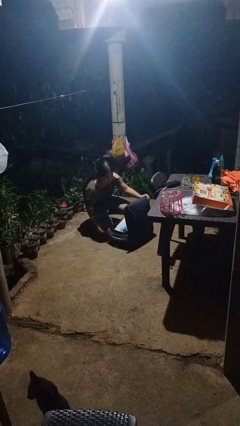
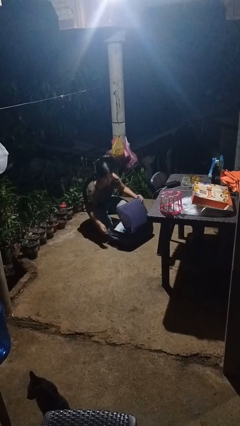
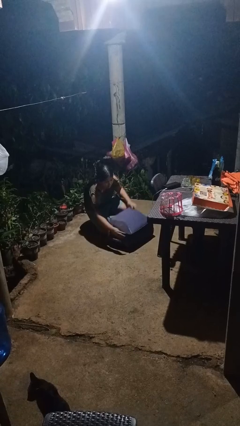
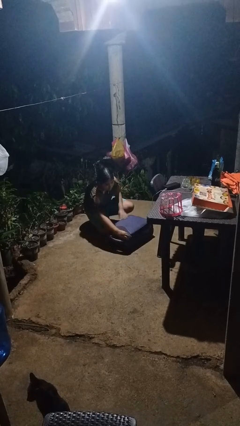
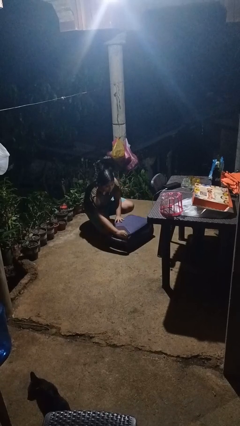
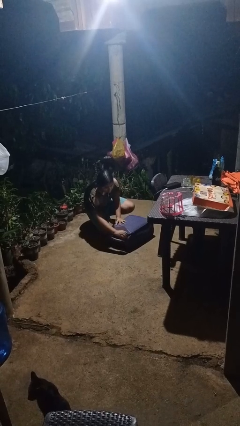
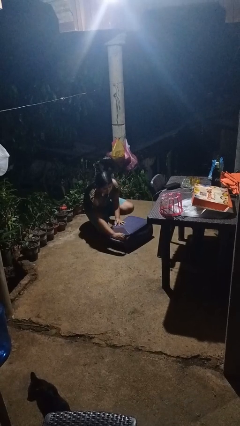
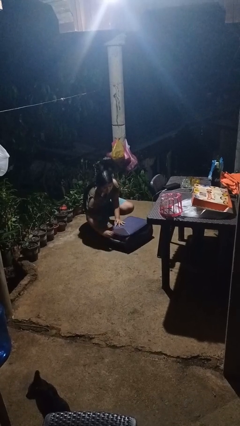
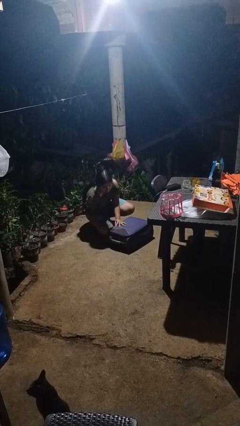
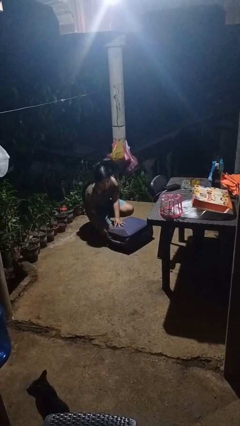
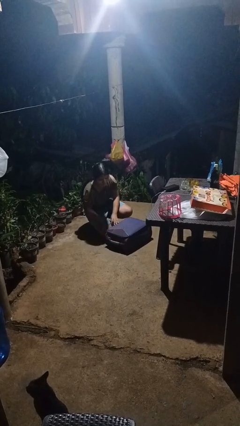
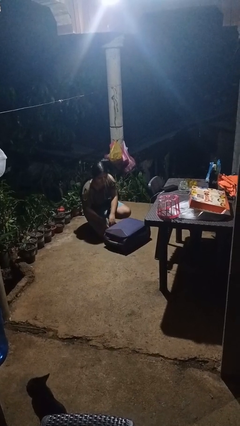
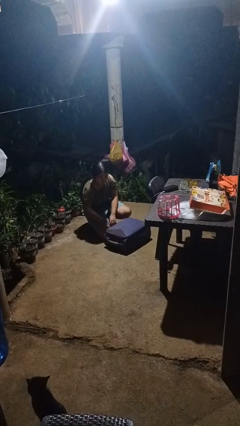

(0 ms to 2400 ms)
person closes suitcase

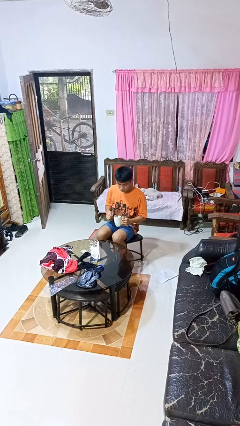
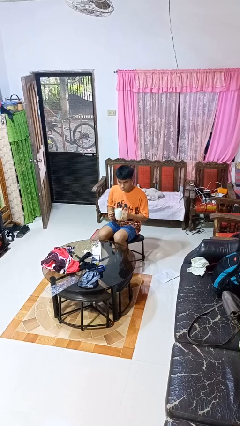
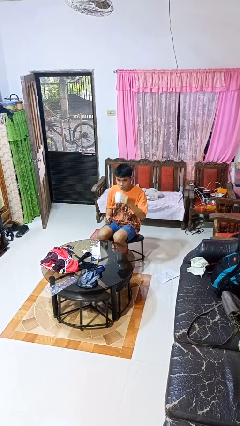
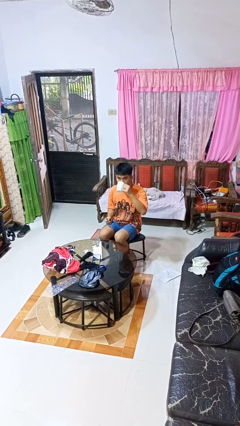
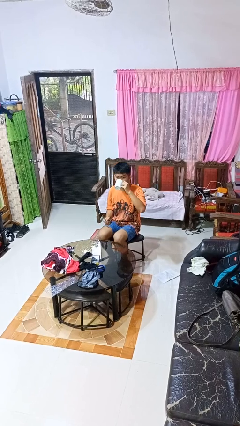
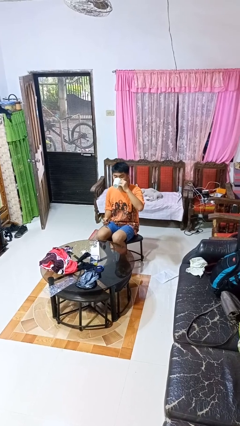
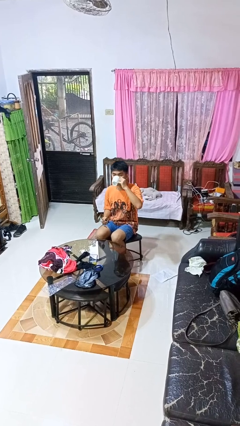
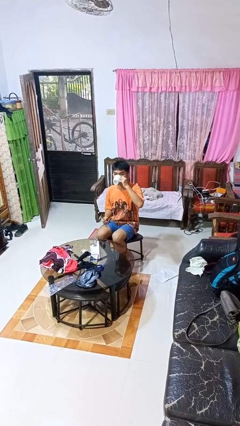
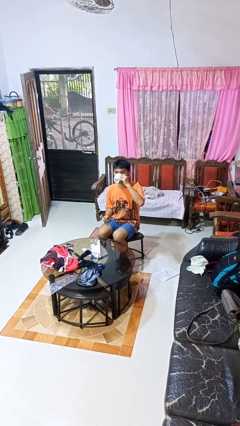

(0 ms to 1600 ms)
person drinks from mug

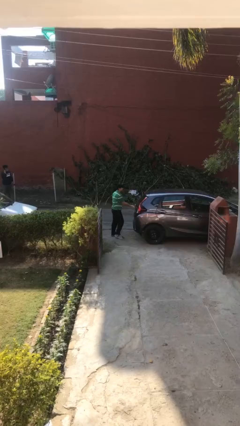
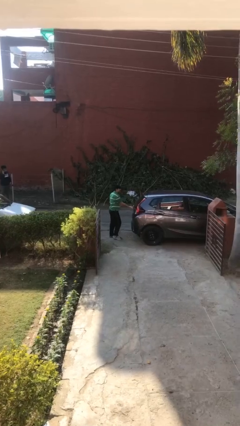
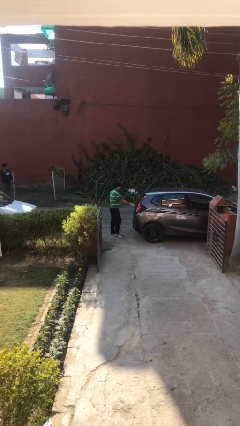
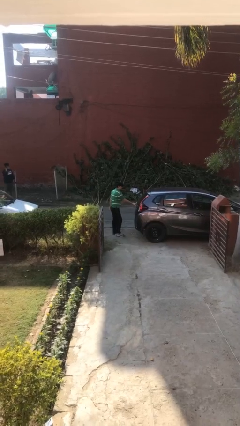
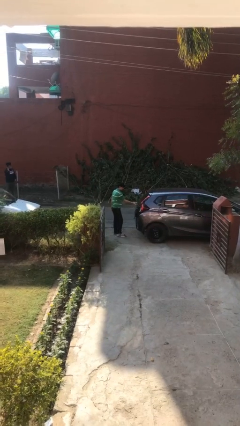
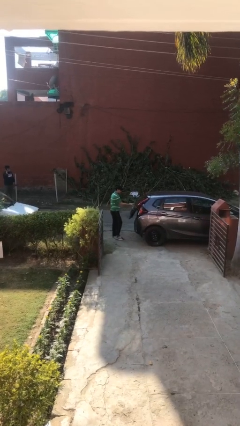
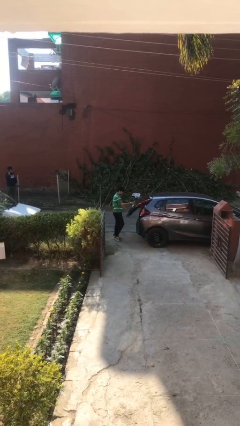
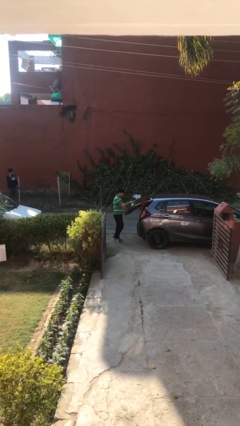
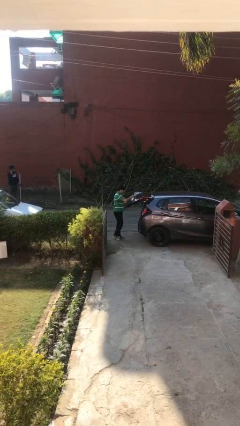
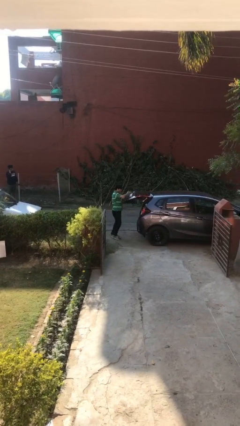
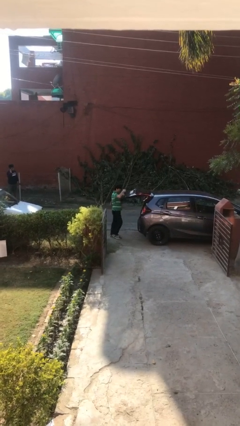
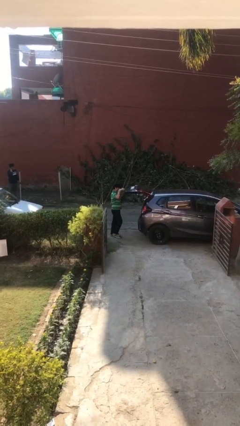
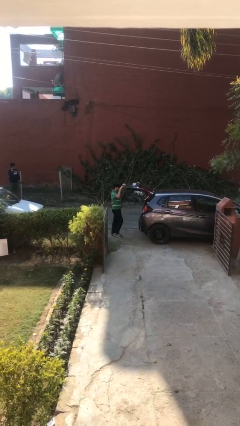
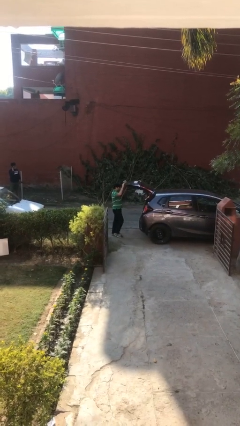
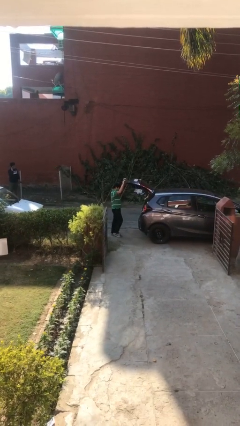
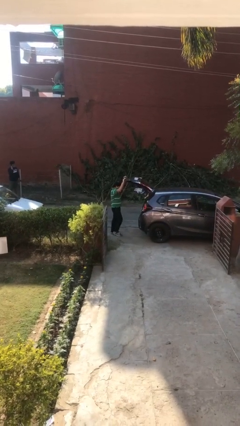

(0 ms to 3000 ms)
person opens car trunk

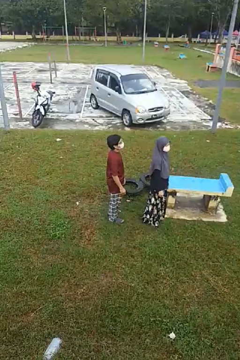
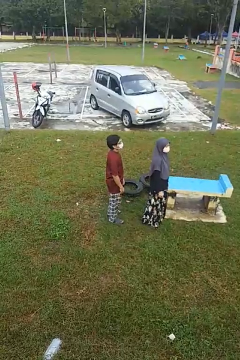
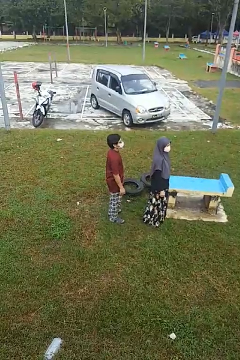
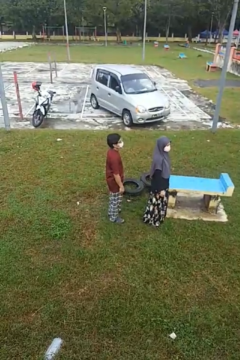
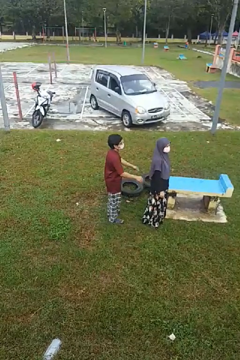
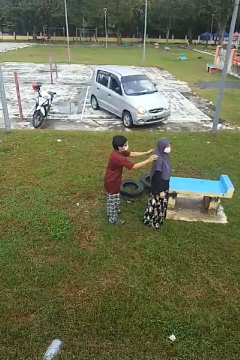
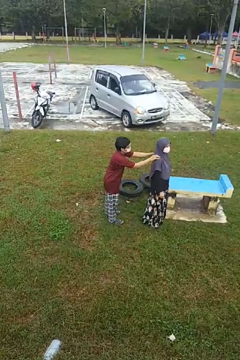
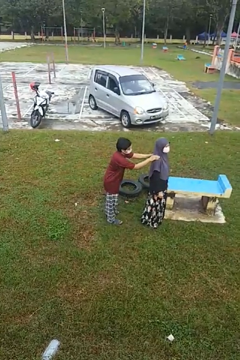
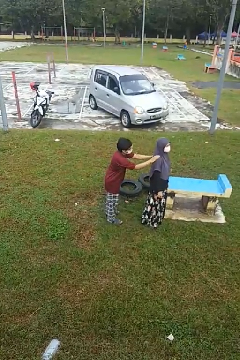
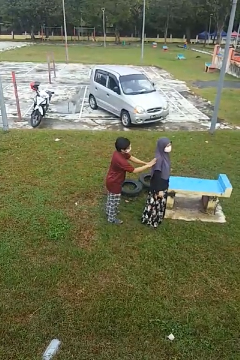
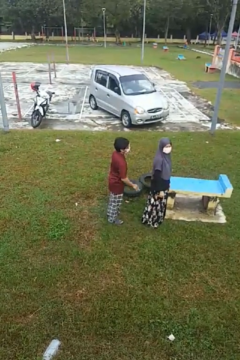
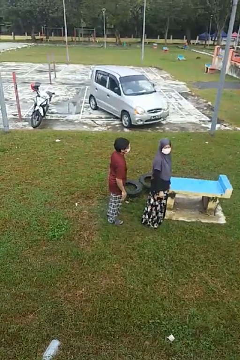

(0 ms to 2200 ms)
person touches back of person

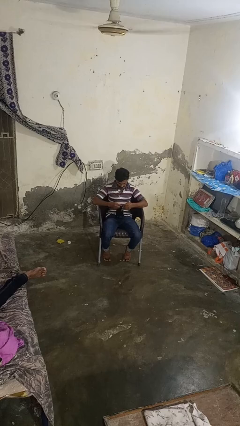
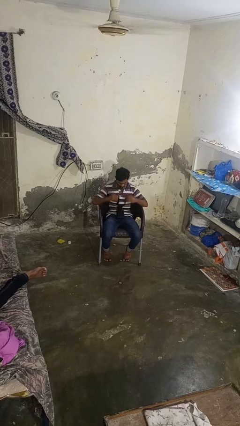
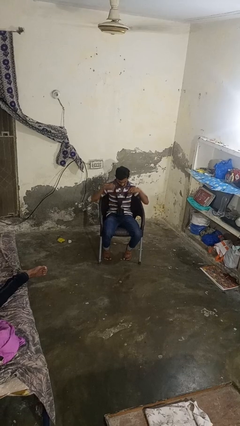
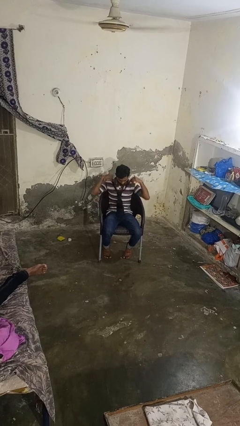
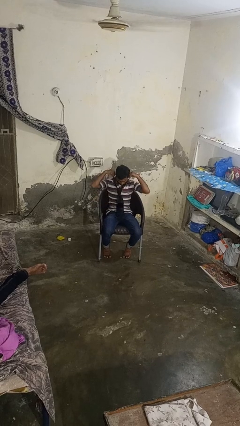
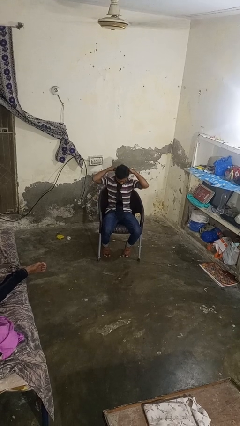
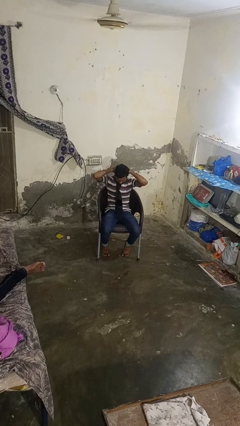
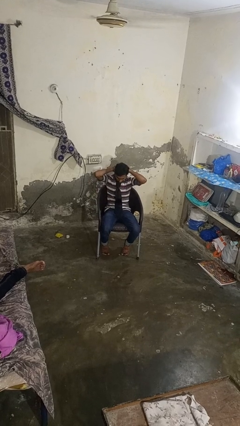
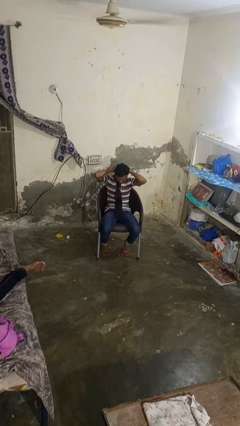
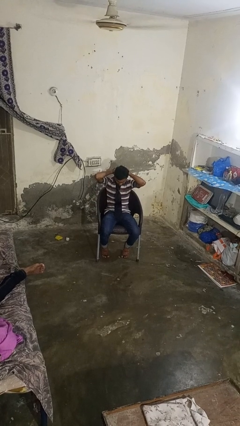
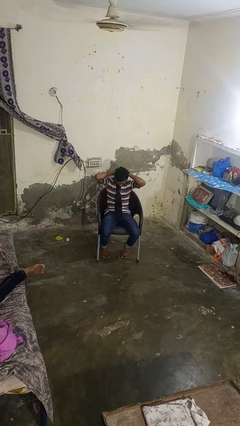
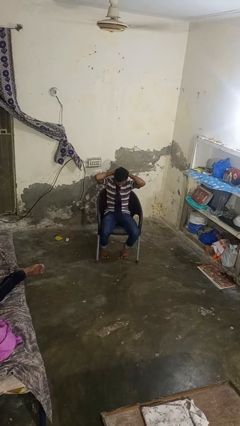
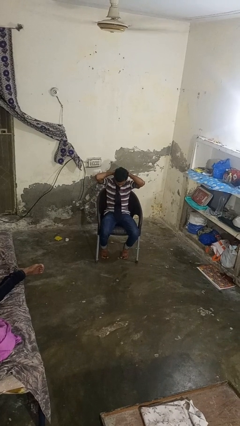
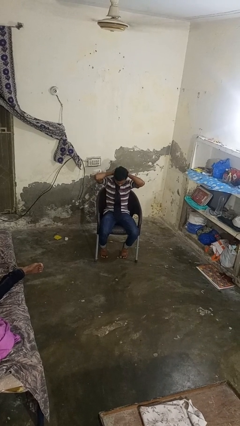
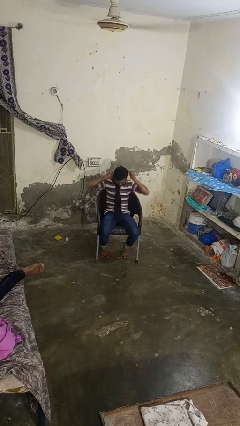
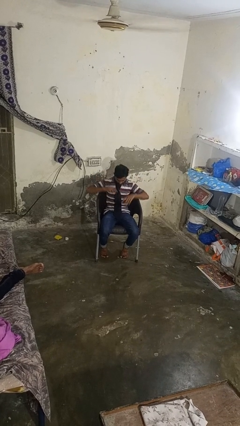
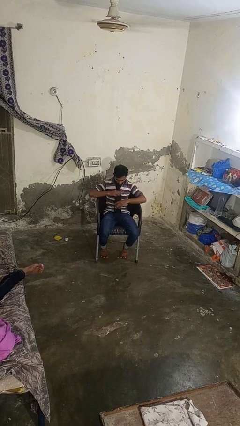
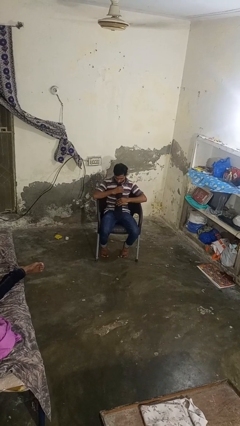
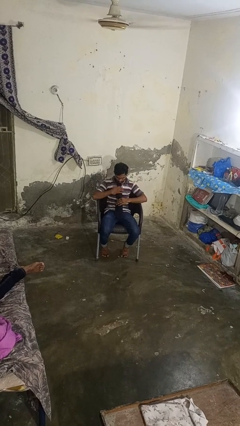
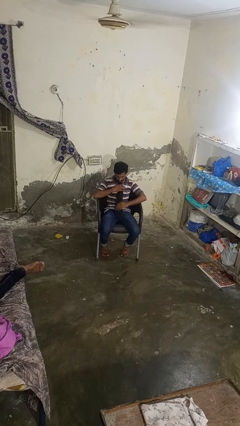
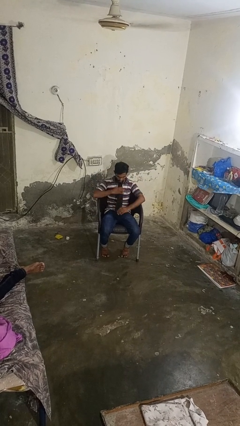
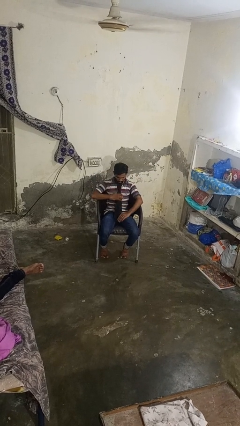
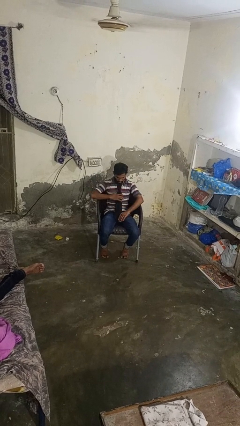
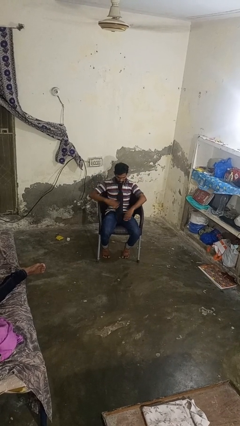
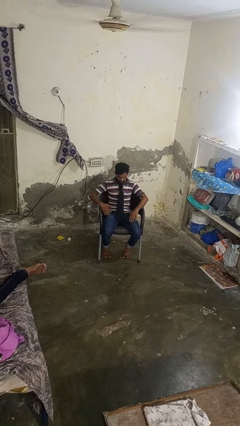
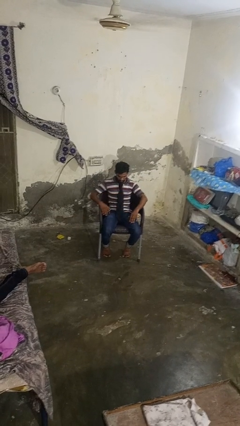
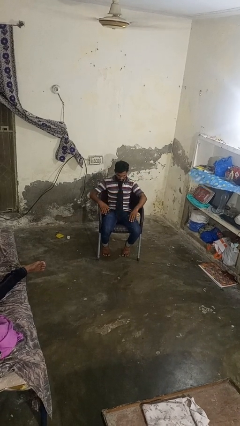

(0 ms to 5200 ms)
person puts on necktie

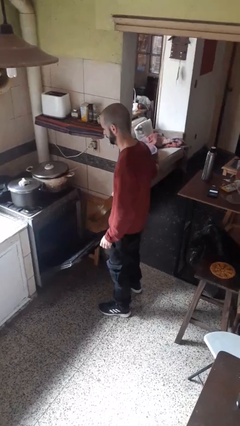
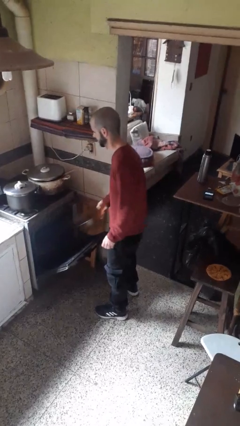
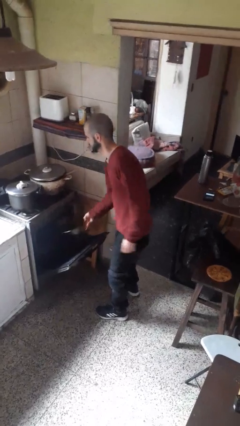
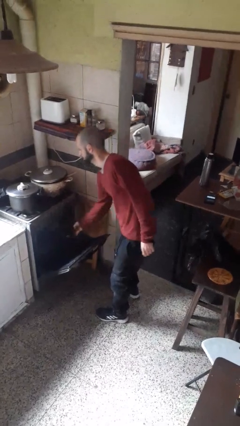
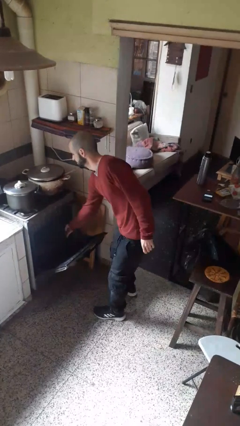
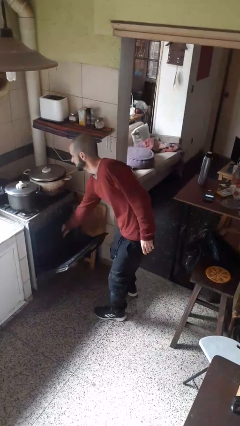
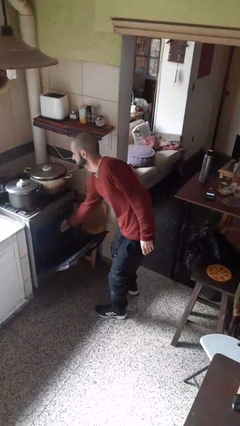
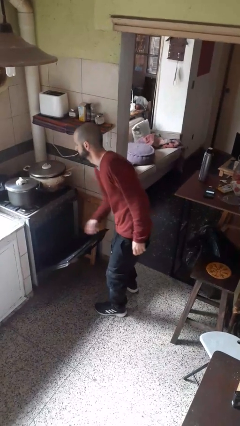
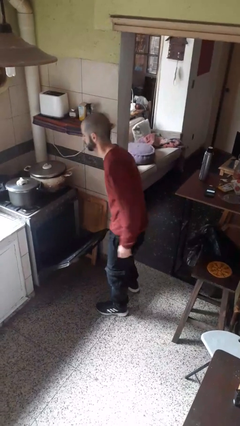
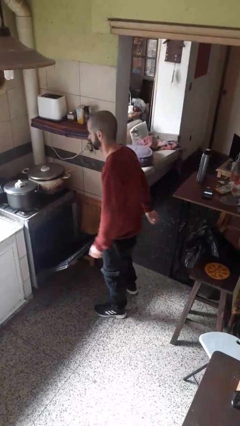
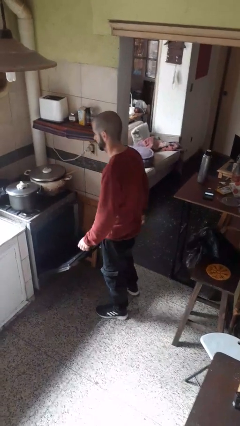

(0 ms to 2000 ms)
person puts object into oven

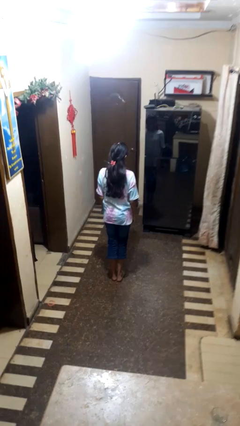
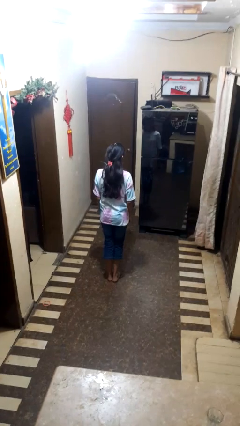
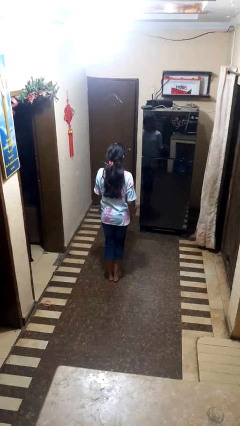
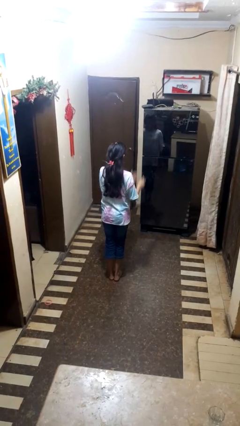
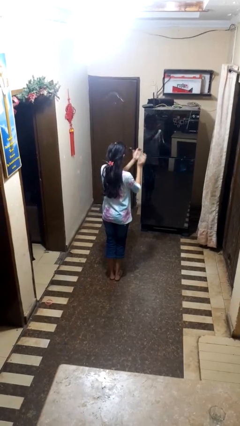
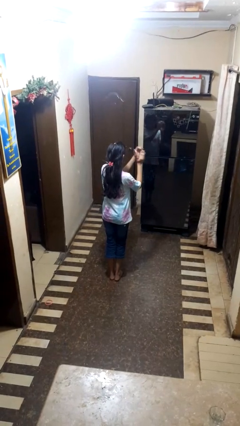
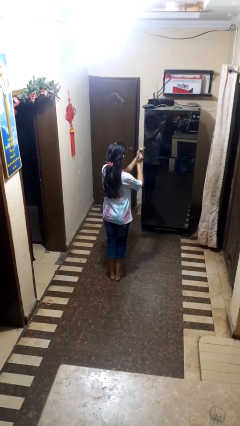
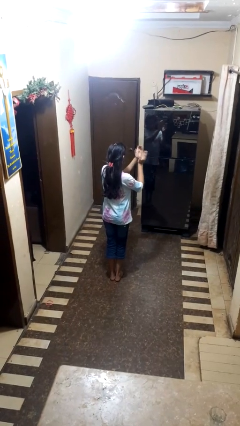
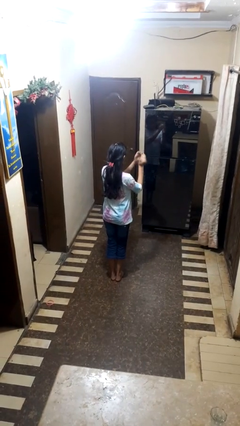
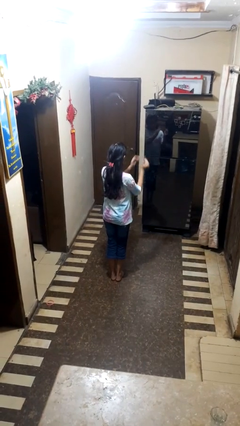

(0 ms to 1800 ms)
person claps hands
